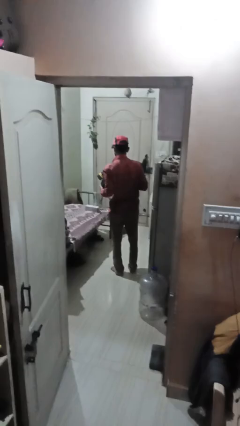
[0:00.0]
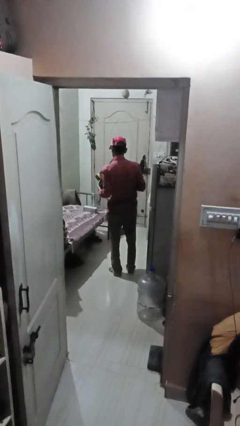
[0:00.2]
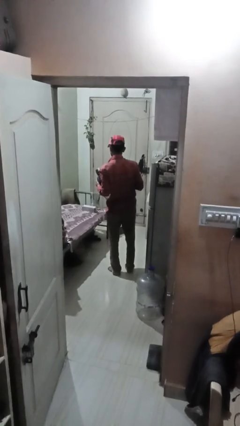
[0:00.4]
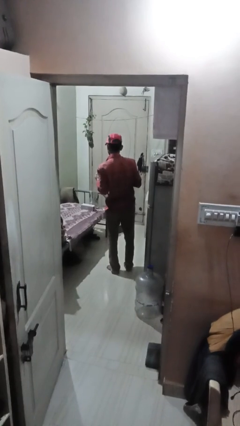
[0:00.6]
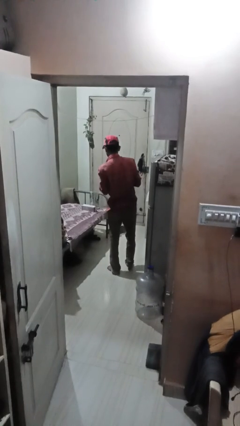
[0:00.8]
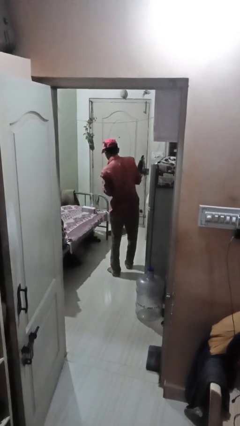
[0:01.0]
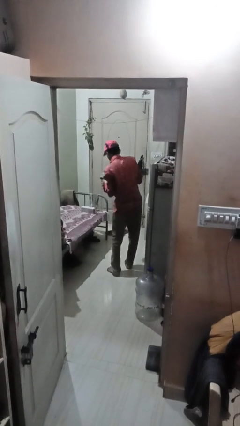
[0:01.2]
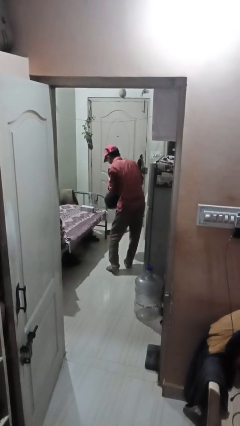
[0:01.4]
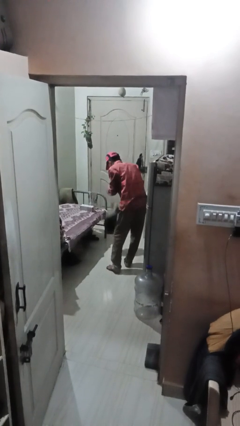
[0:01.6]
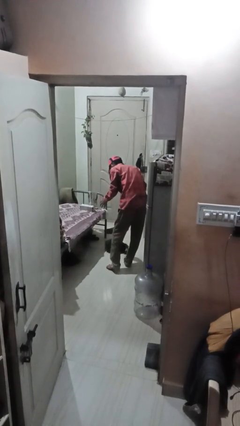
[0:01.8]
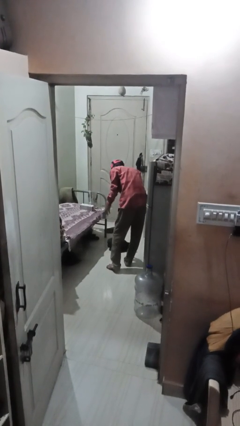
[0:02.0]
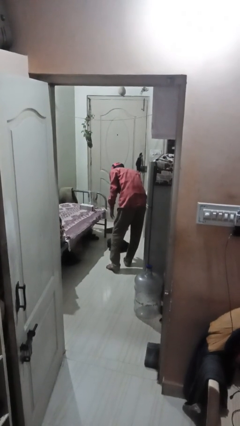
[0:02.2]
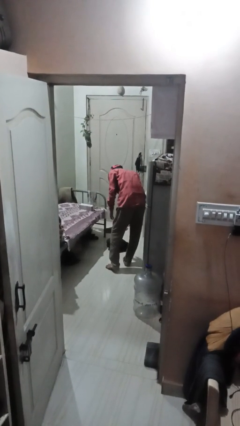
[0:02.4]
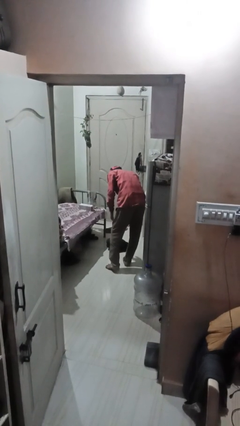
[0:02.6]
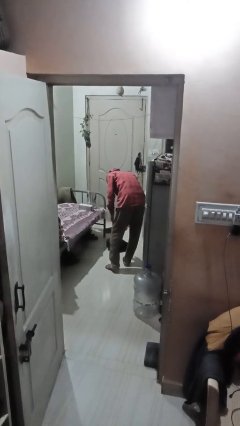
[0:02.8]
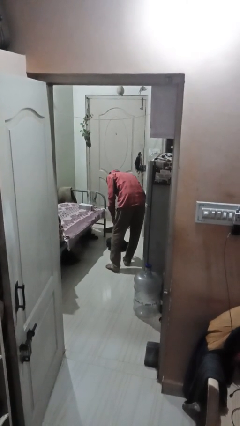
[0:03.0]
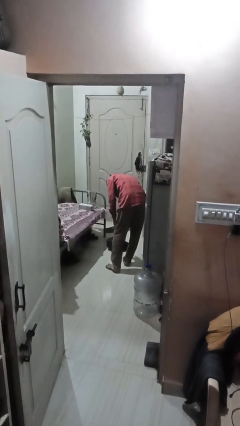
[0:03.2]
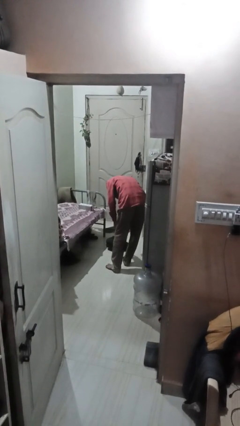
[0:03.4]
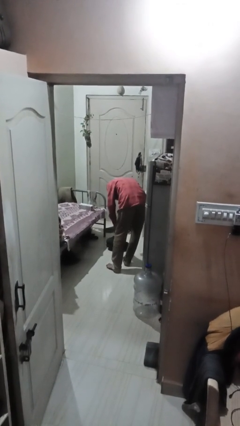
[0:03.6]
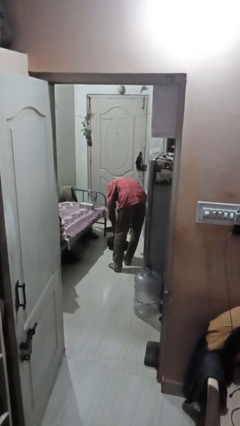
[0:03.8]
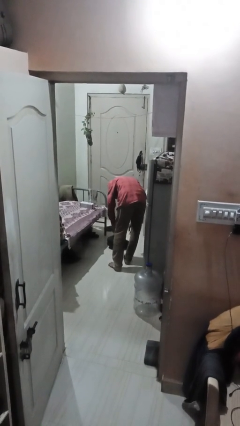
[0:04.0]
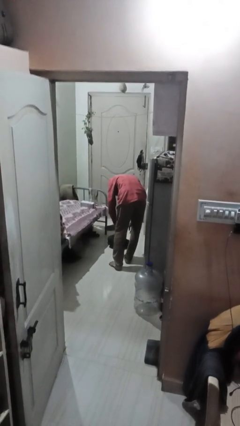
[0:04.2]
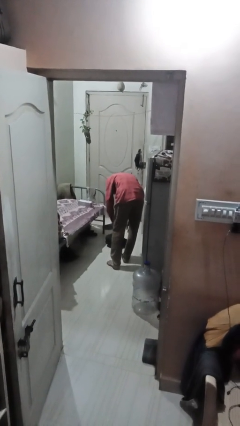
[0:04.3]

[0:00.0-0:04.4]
person drops object

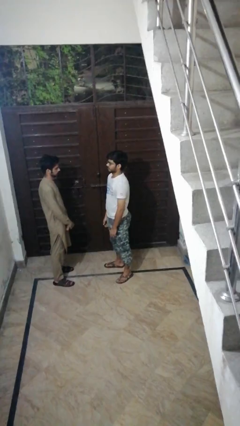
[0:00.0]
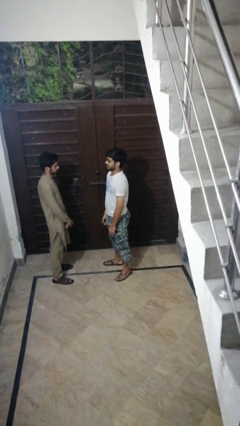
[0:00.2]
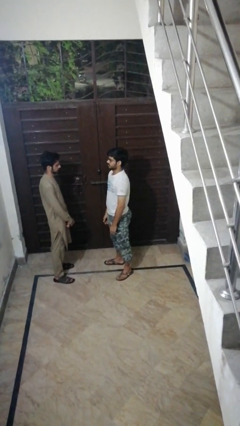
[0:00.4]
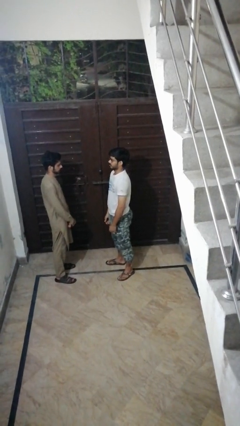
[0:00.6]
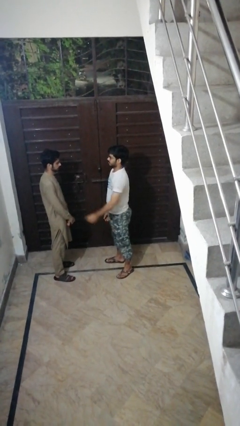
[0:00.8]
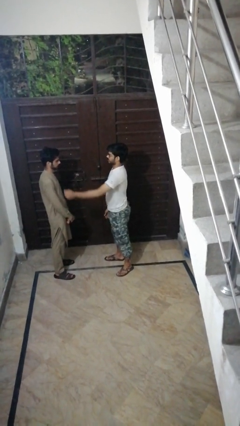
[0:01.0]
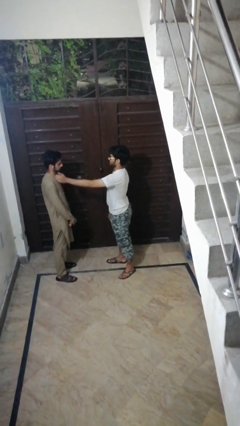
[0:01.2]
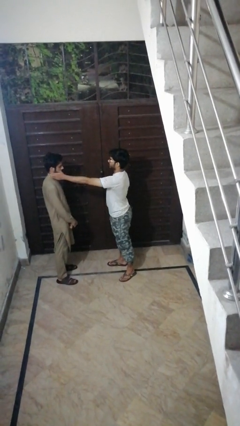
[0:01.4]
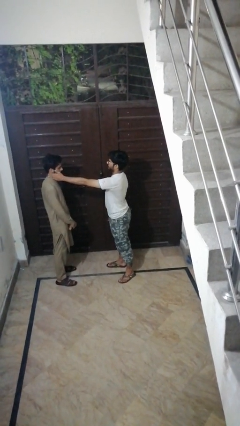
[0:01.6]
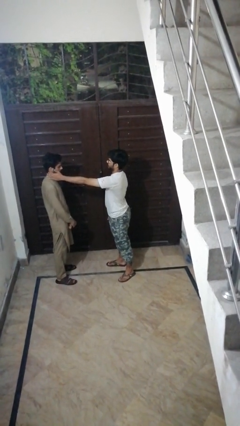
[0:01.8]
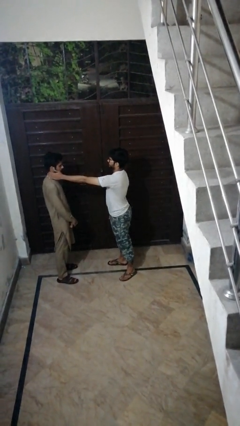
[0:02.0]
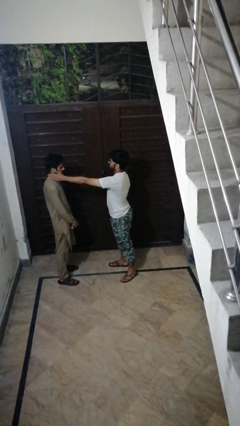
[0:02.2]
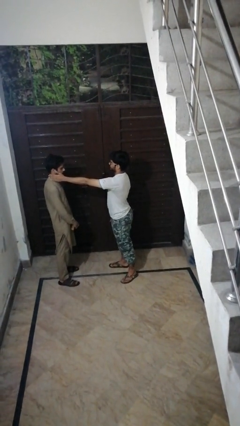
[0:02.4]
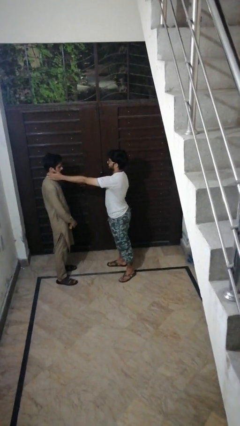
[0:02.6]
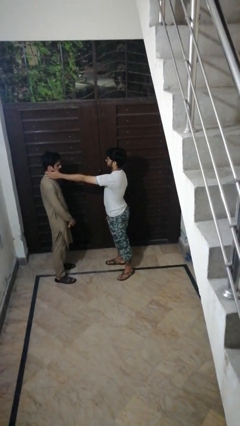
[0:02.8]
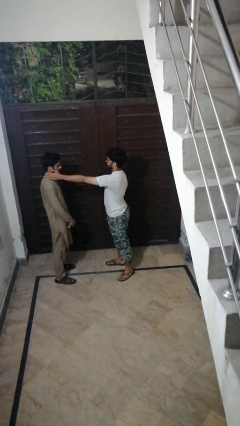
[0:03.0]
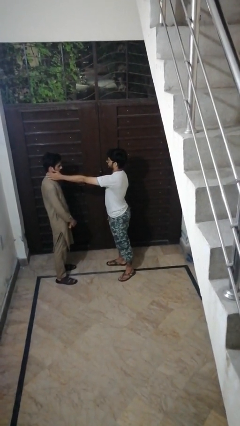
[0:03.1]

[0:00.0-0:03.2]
person touches face of person

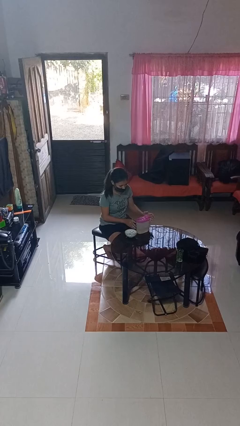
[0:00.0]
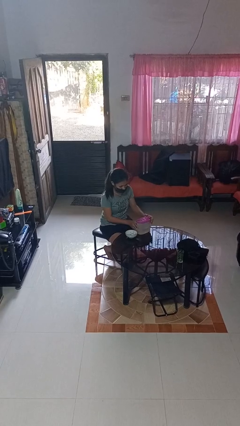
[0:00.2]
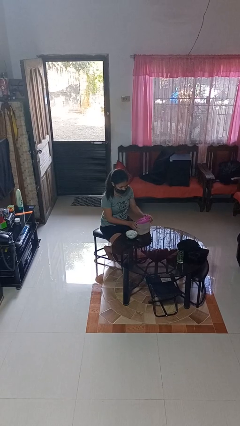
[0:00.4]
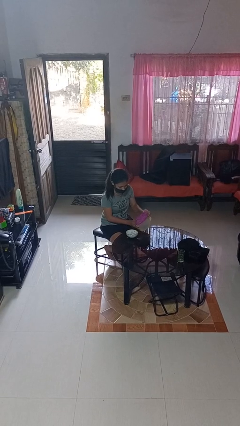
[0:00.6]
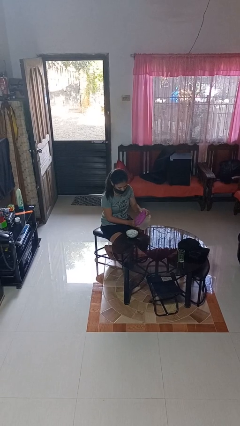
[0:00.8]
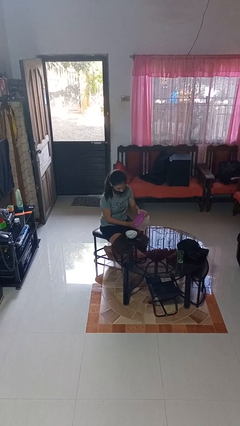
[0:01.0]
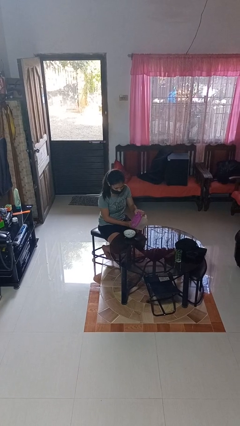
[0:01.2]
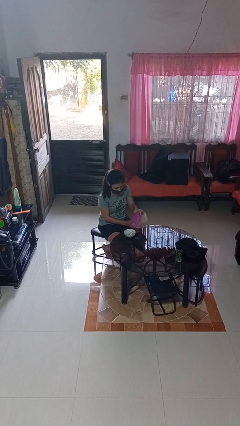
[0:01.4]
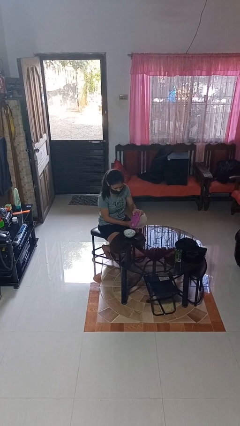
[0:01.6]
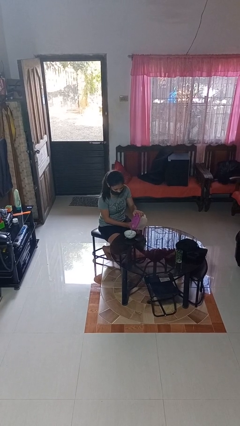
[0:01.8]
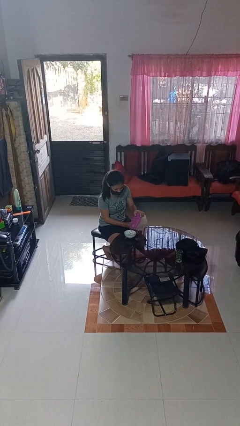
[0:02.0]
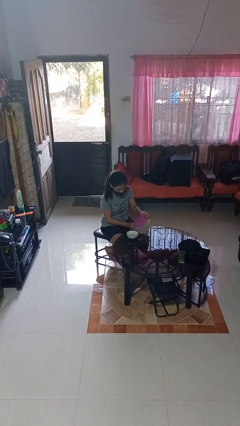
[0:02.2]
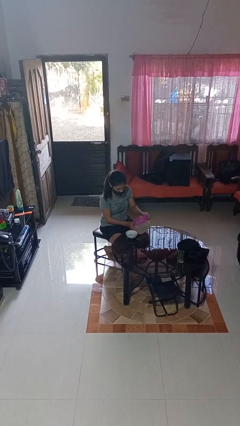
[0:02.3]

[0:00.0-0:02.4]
person pours into bowl

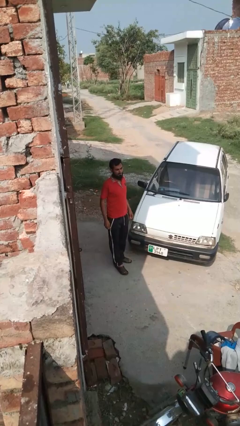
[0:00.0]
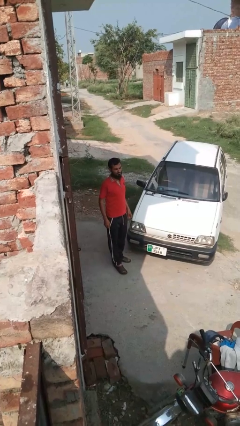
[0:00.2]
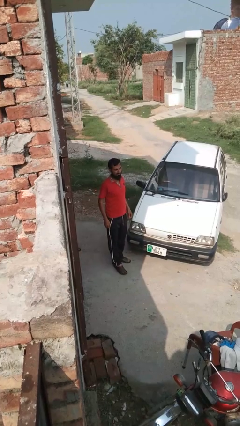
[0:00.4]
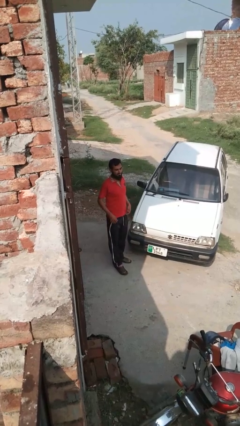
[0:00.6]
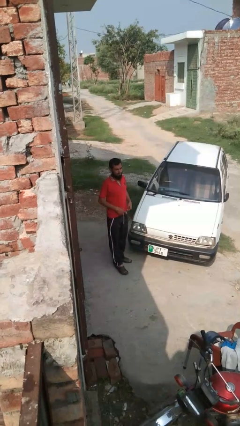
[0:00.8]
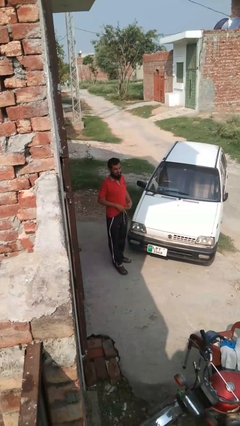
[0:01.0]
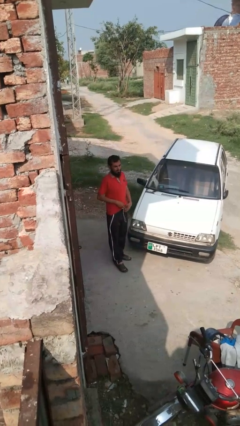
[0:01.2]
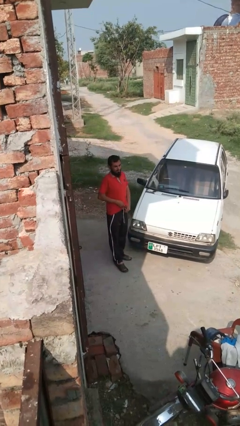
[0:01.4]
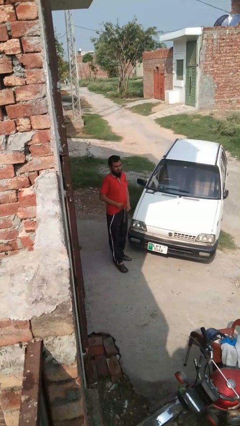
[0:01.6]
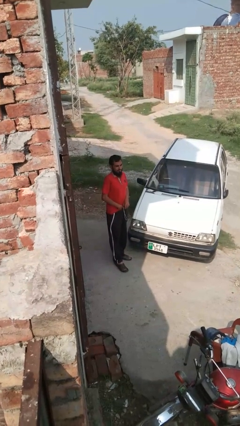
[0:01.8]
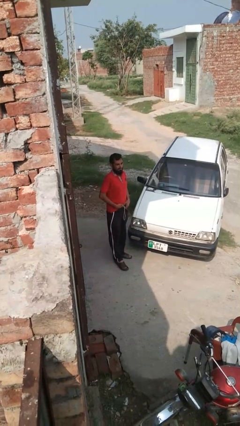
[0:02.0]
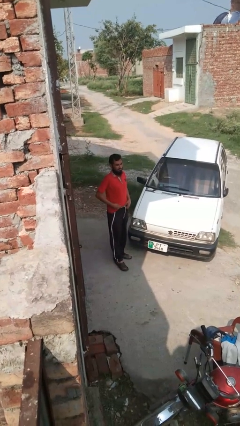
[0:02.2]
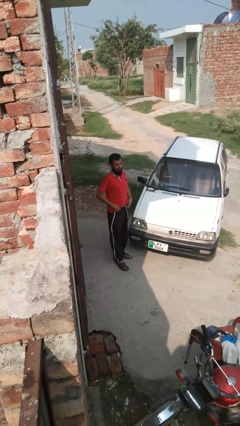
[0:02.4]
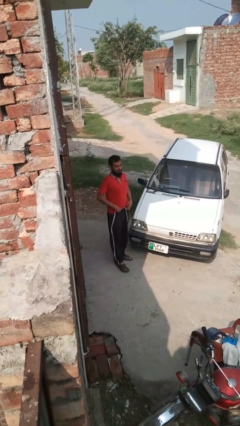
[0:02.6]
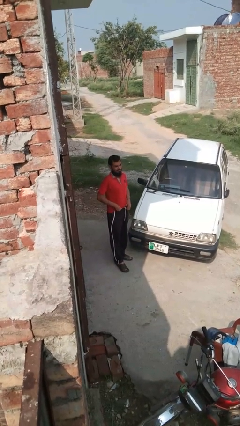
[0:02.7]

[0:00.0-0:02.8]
person tucks in shirt

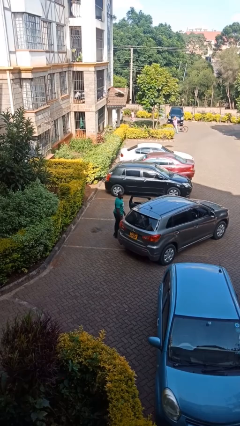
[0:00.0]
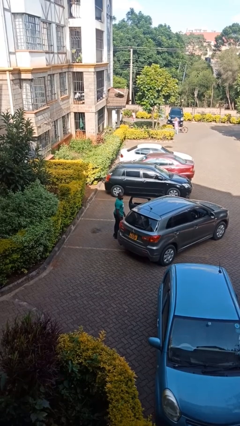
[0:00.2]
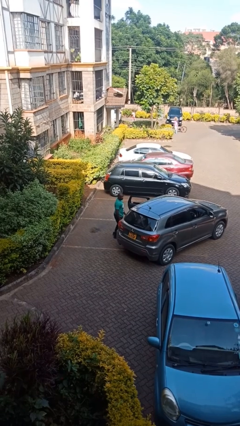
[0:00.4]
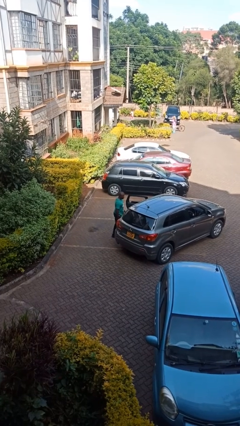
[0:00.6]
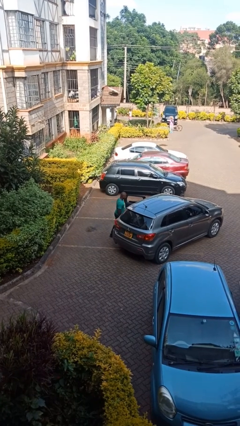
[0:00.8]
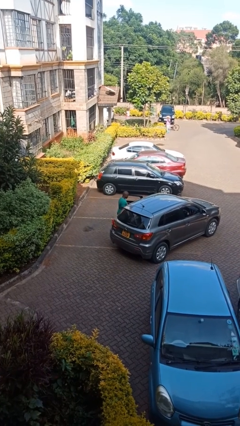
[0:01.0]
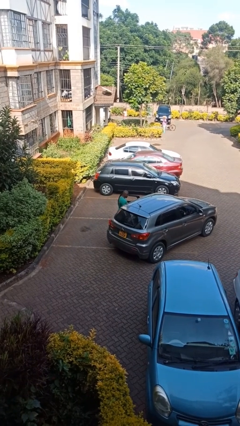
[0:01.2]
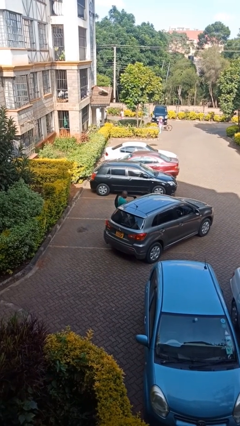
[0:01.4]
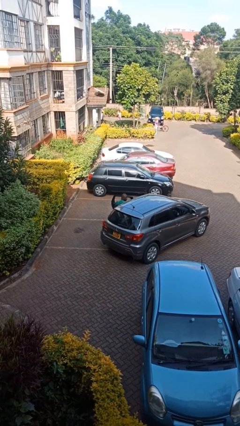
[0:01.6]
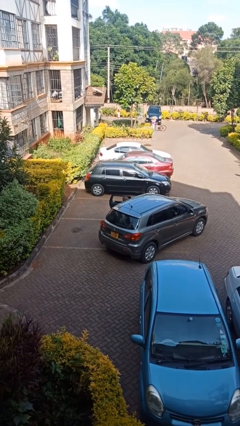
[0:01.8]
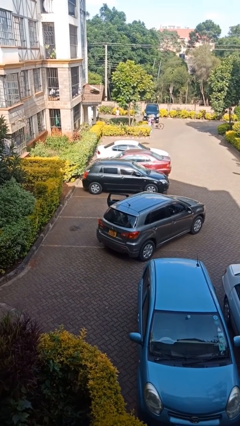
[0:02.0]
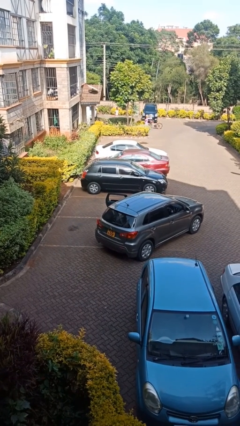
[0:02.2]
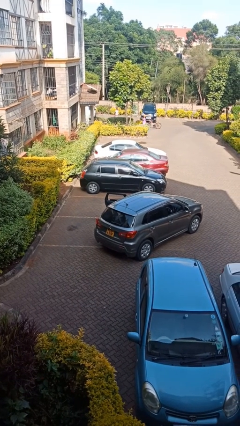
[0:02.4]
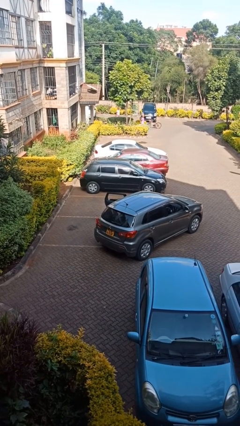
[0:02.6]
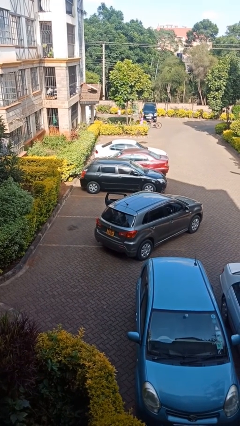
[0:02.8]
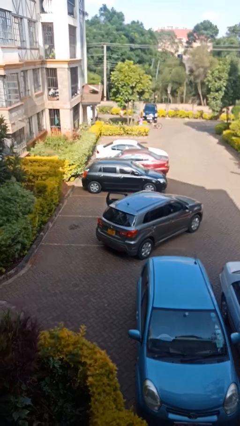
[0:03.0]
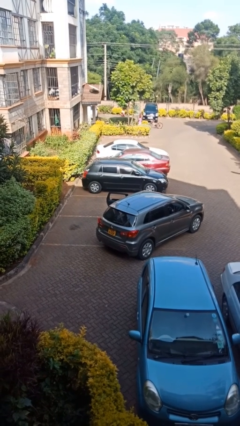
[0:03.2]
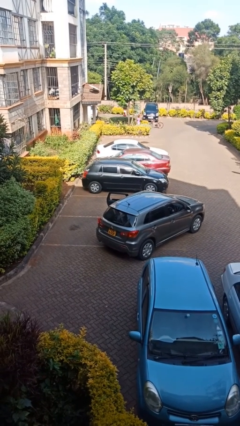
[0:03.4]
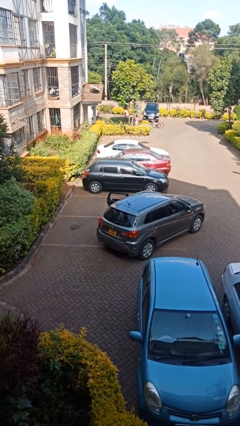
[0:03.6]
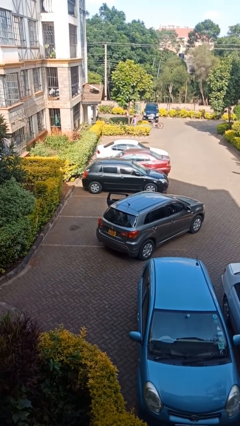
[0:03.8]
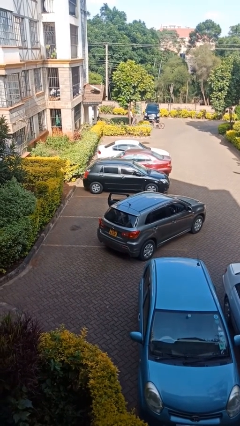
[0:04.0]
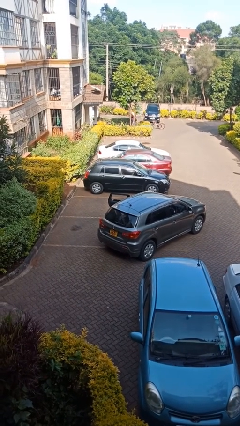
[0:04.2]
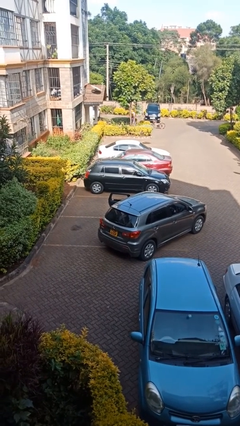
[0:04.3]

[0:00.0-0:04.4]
person enters car

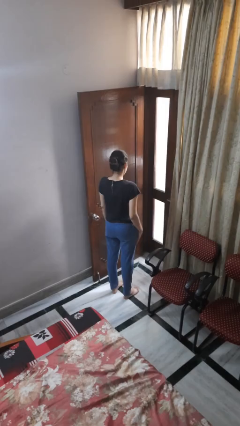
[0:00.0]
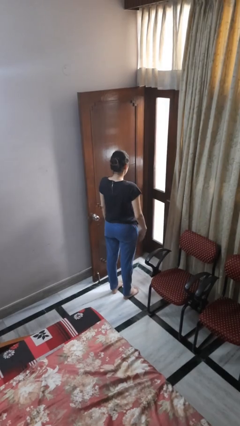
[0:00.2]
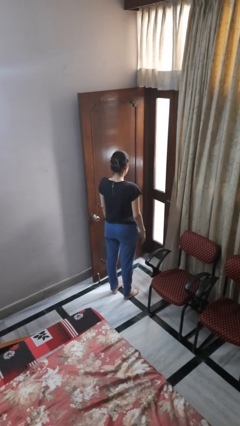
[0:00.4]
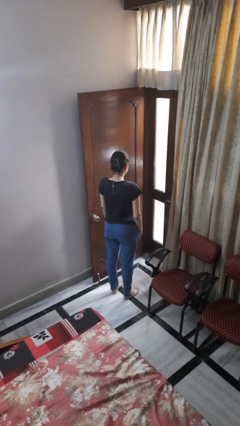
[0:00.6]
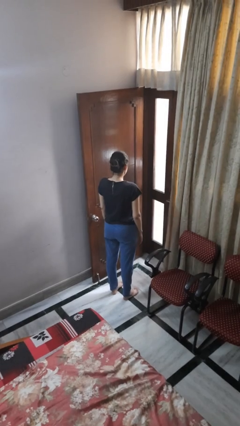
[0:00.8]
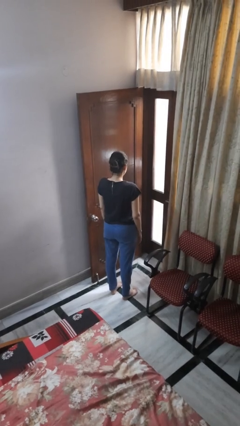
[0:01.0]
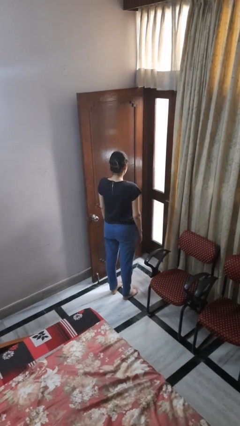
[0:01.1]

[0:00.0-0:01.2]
person slaps hands on thighs
